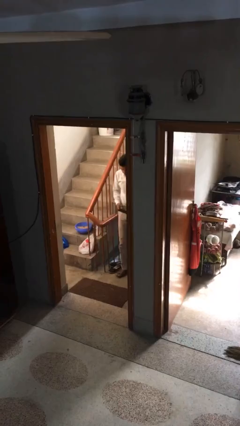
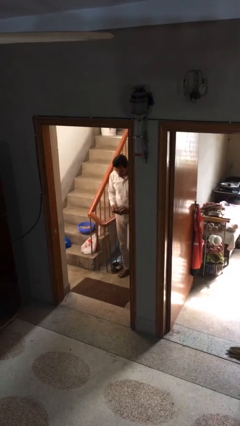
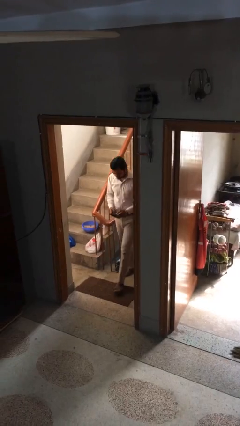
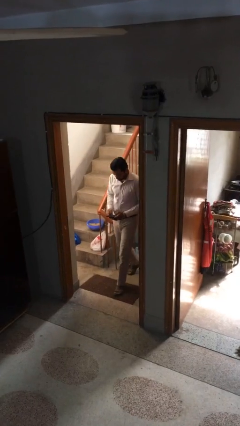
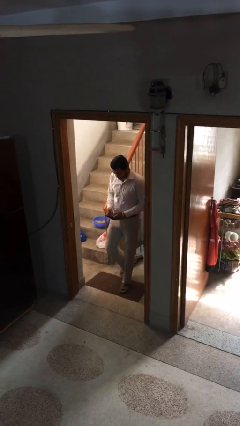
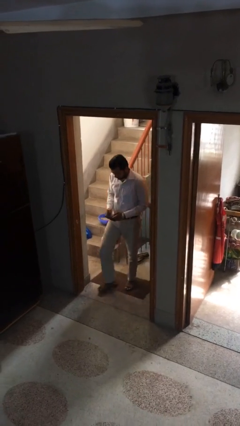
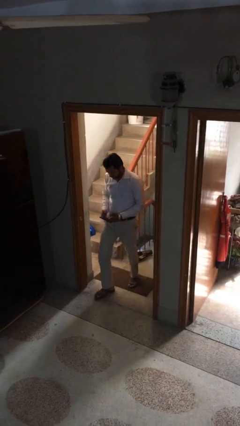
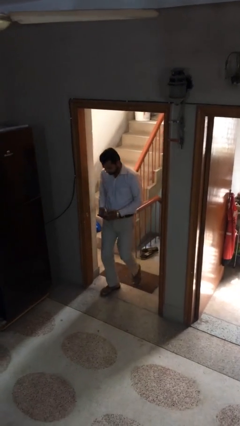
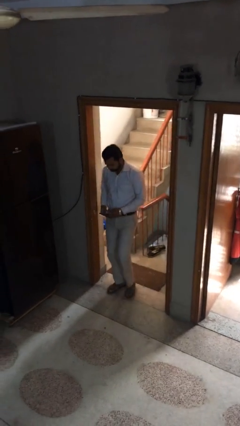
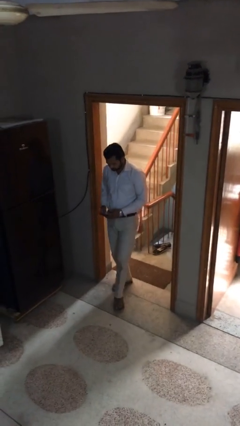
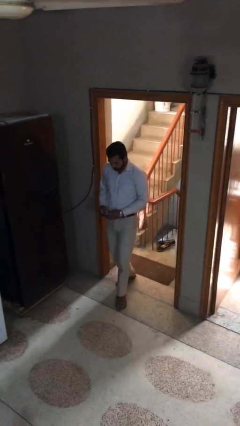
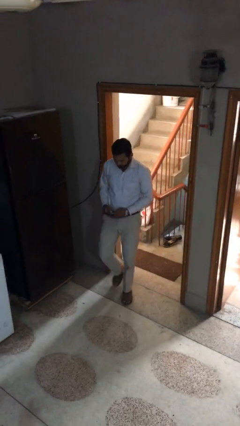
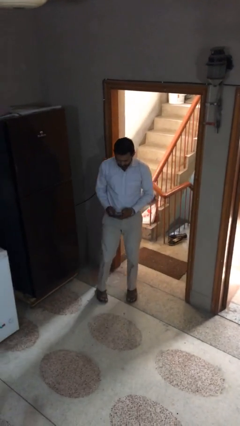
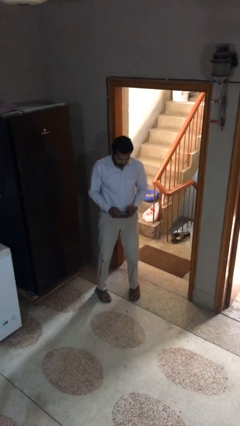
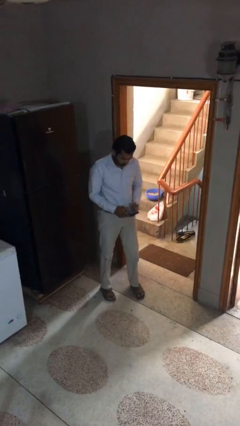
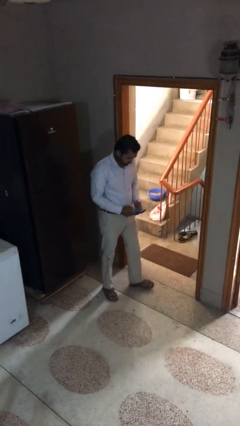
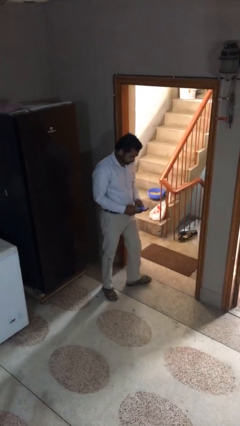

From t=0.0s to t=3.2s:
person enters scene through structure

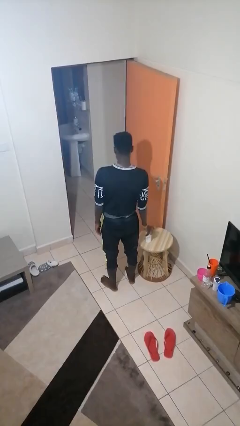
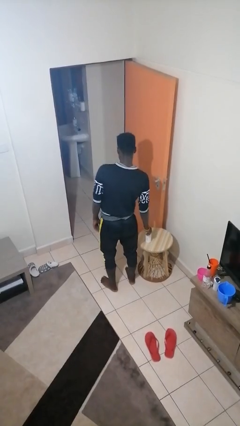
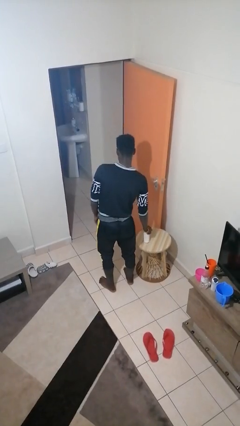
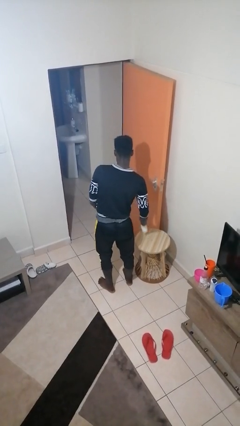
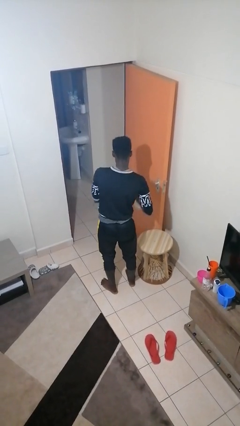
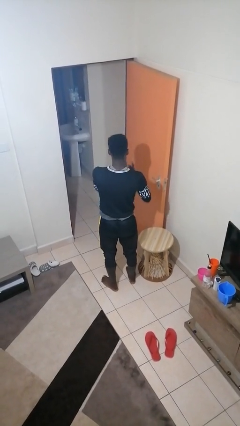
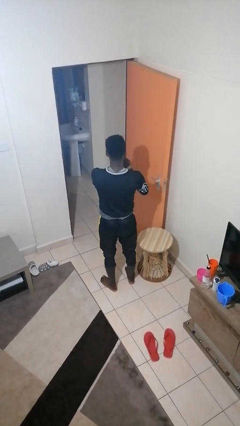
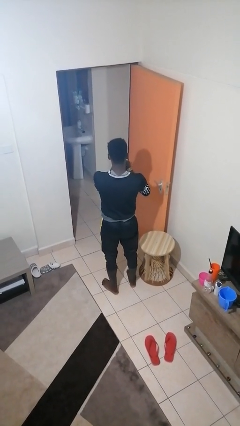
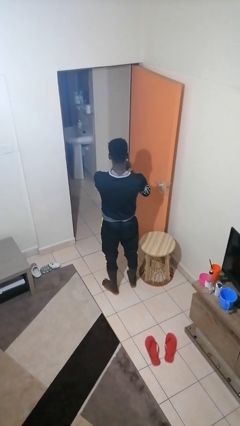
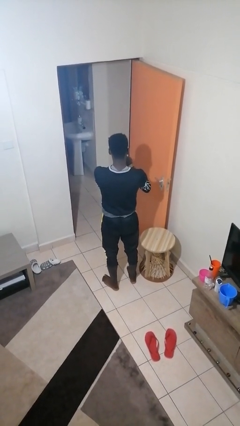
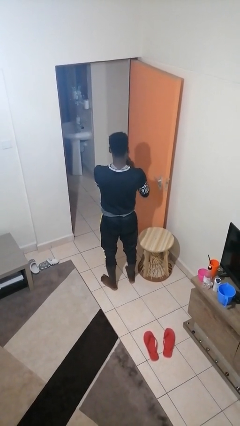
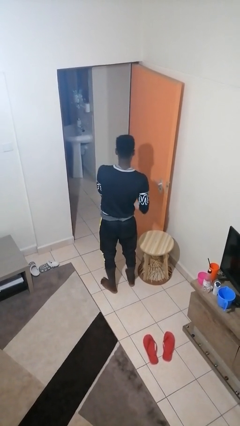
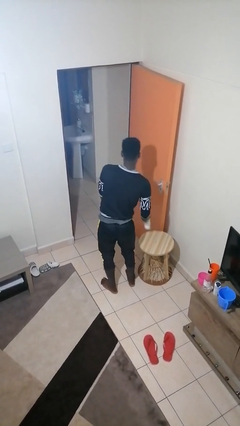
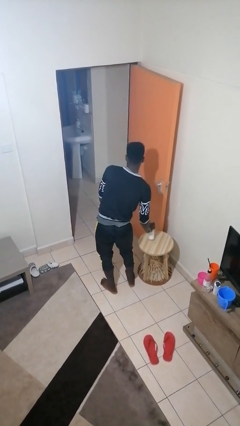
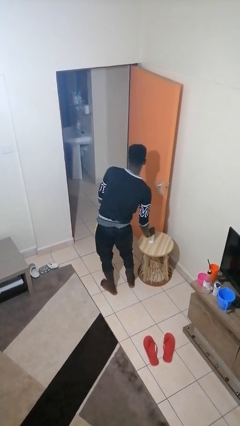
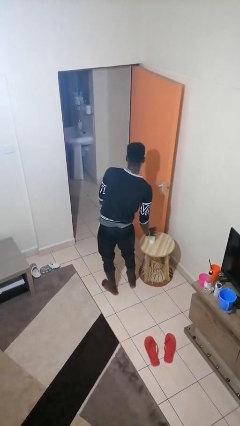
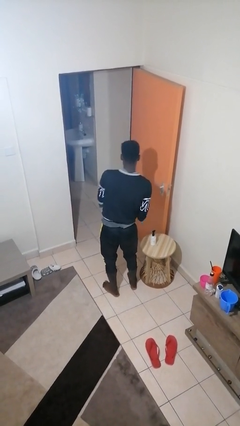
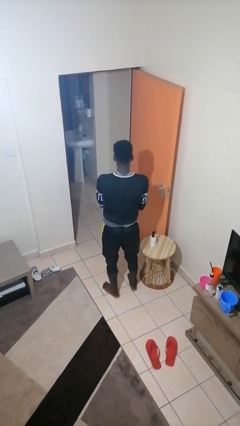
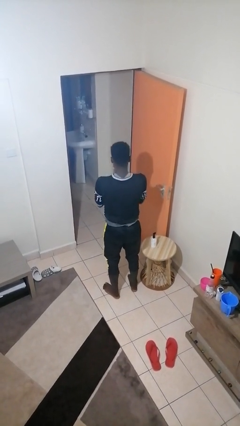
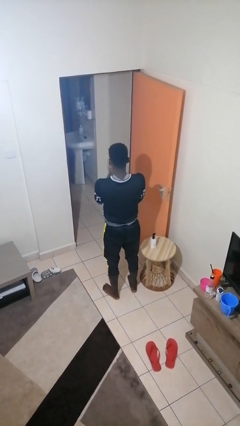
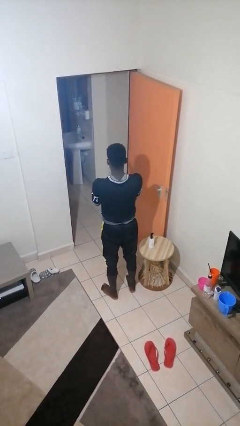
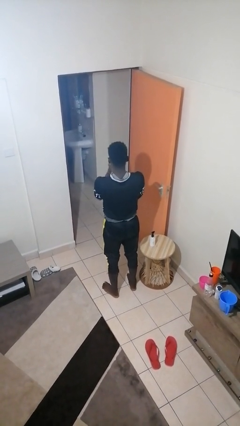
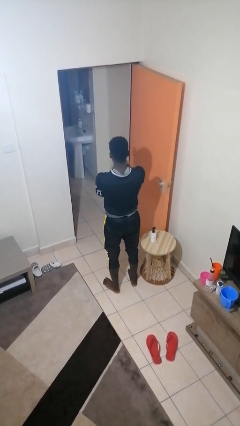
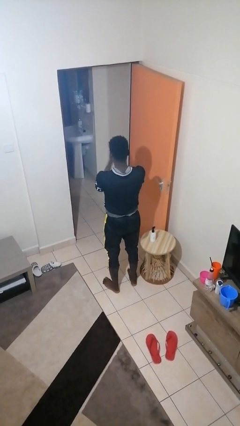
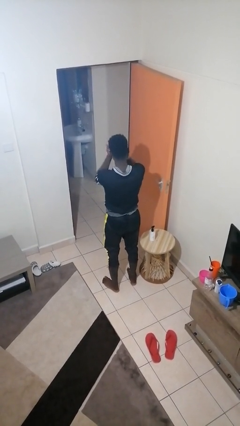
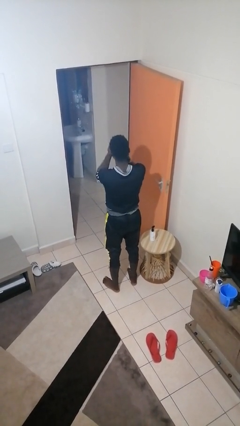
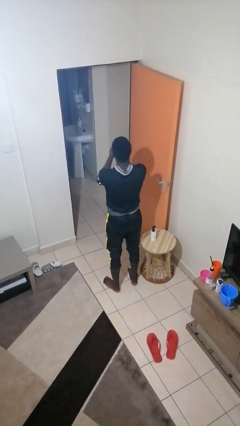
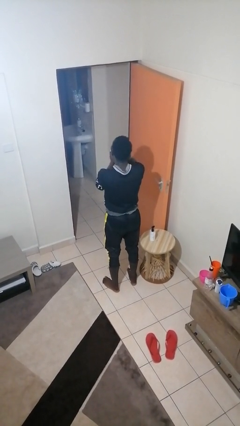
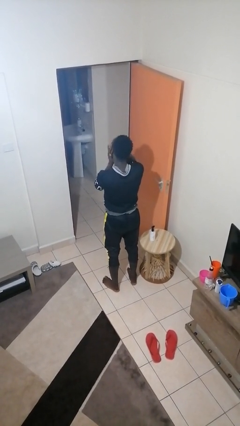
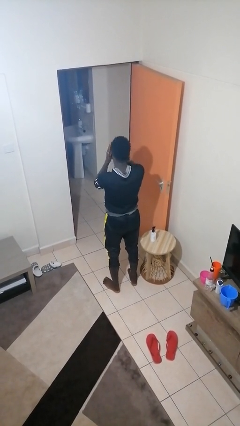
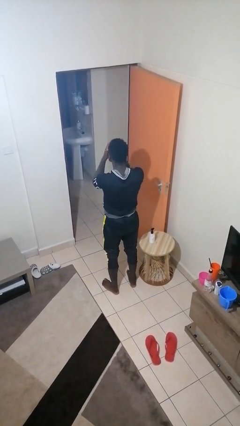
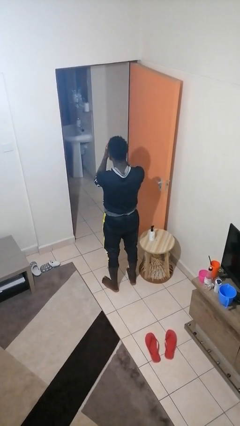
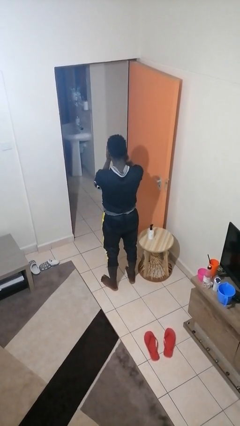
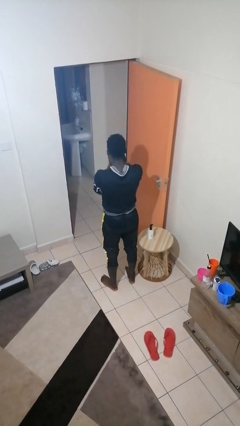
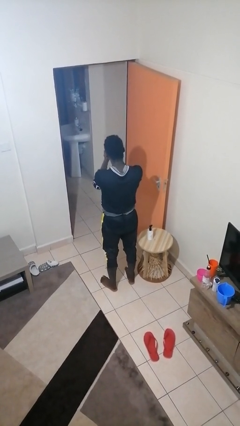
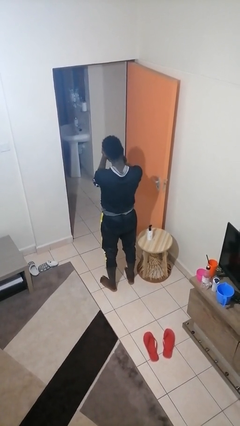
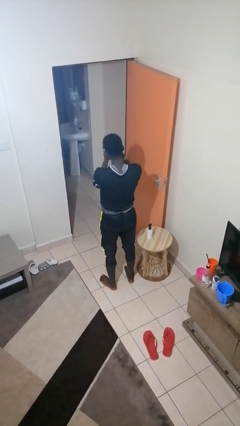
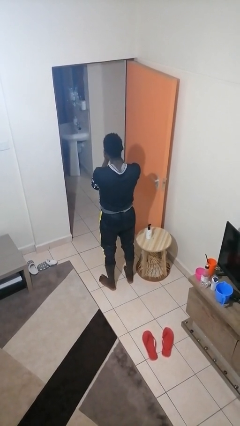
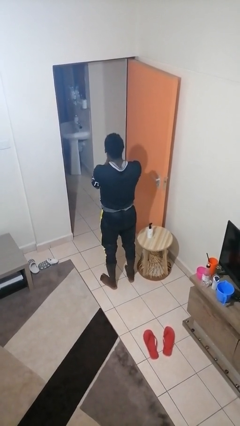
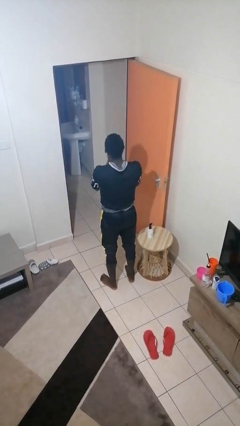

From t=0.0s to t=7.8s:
person applies sunscreen

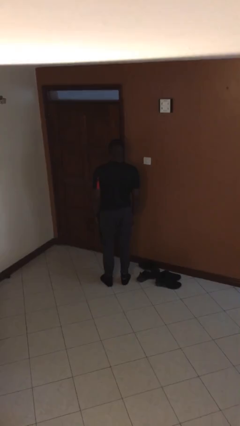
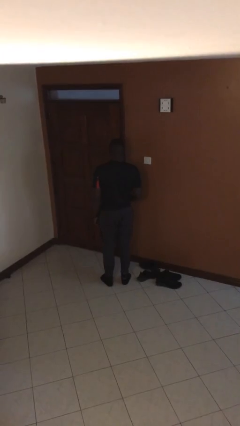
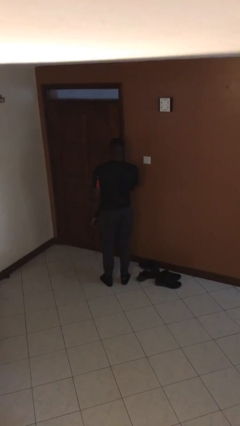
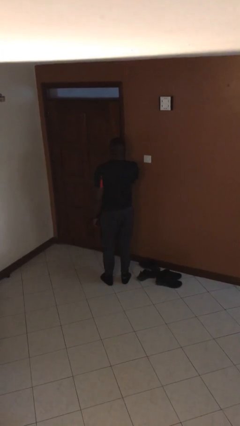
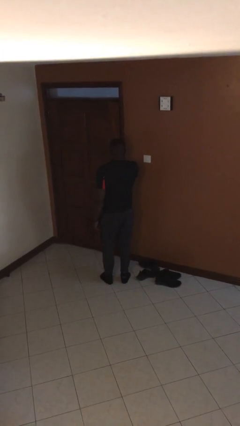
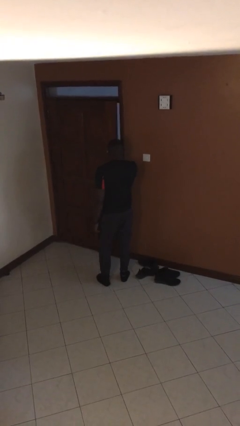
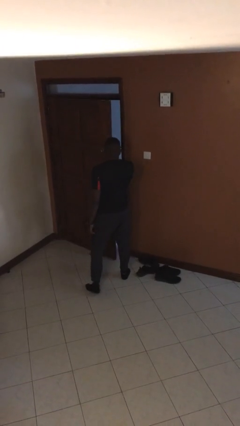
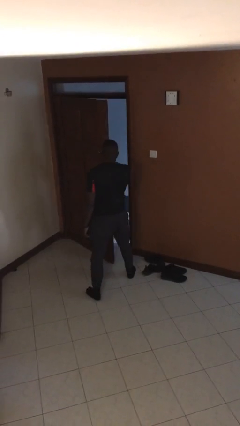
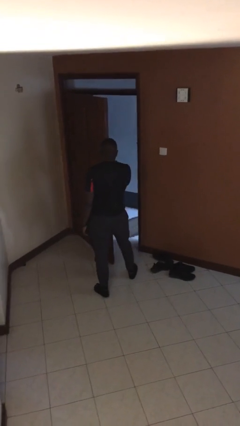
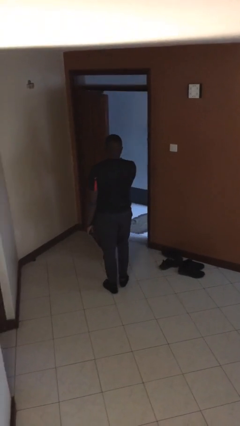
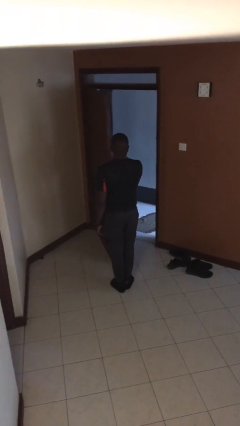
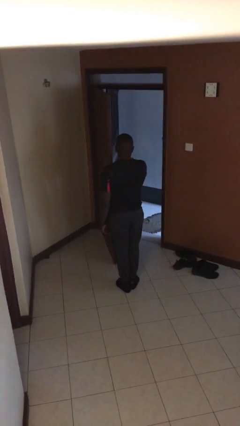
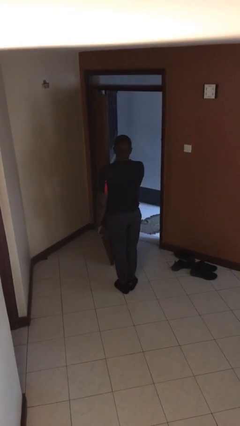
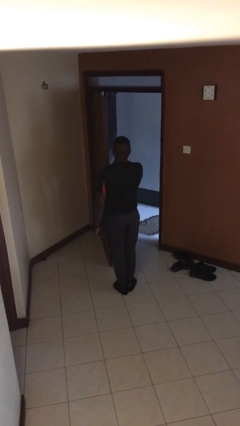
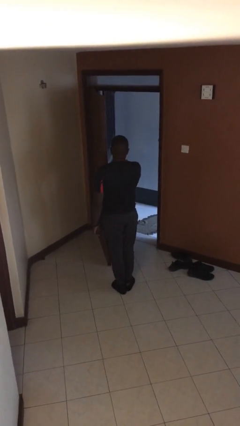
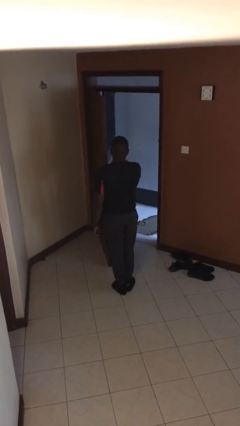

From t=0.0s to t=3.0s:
person opens facility door

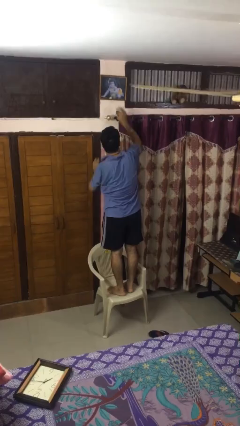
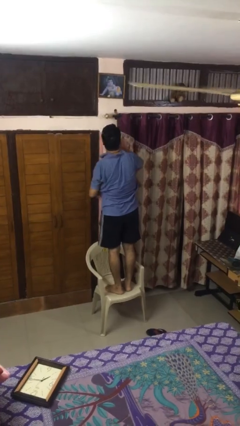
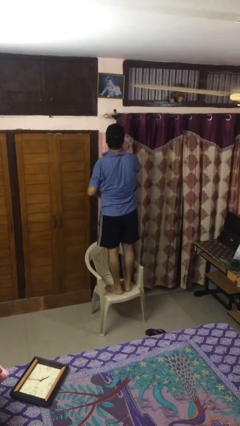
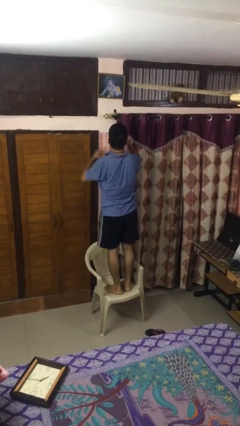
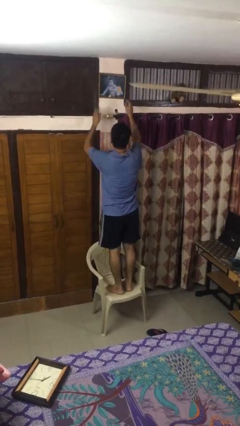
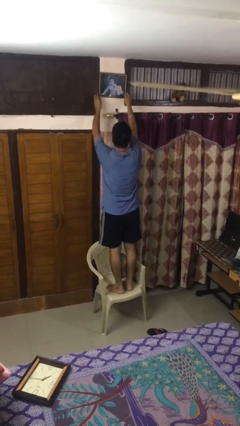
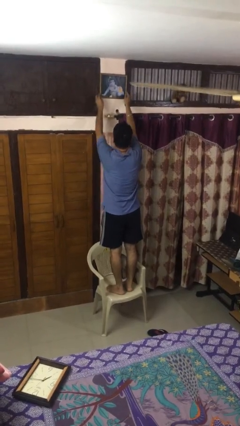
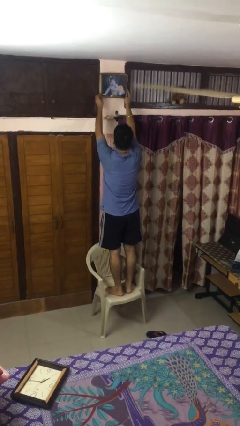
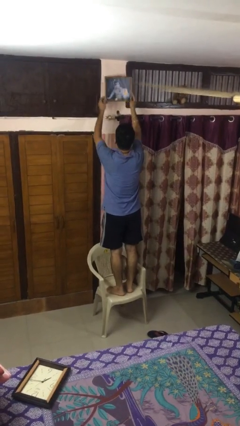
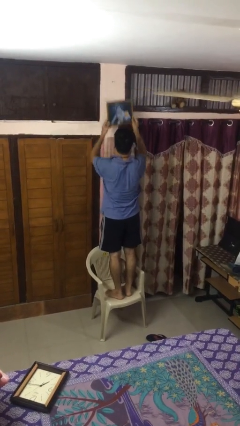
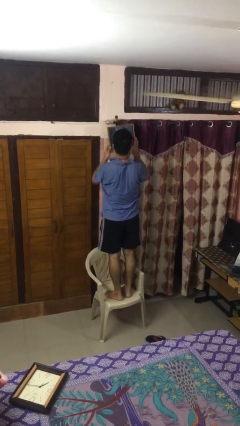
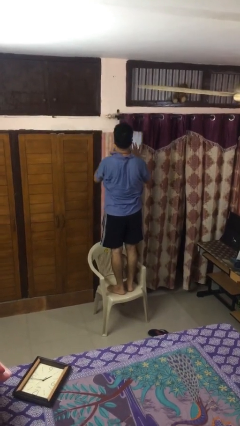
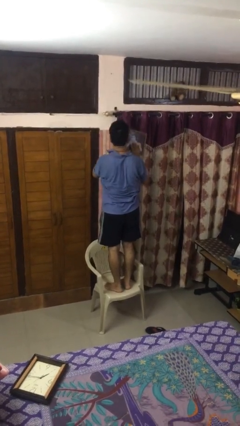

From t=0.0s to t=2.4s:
person takes down picture frame

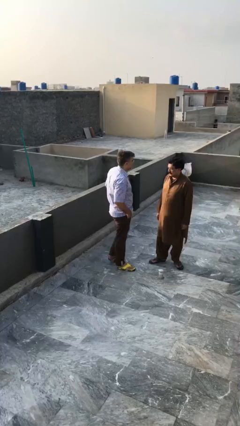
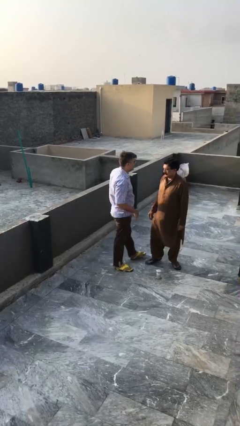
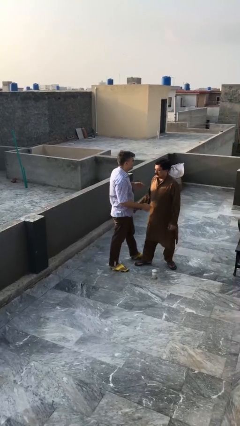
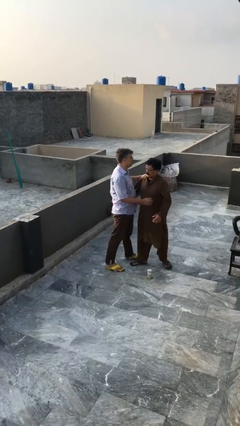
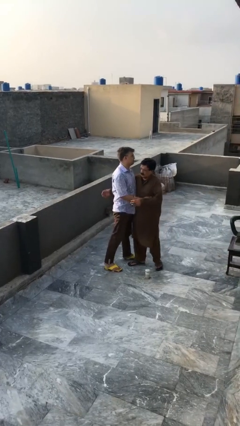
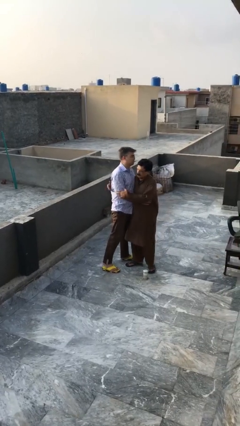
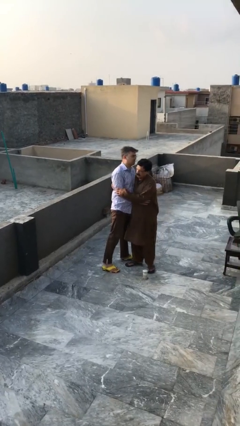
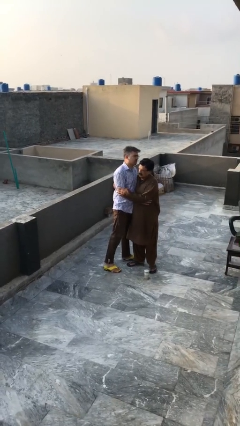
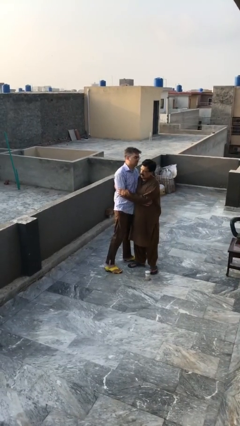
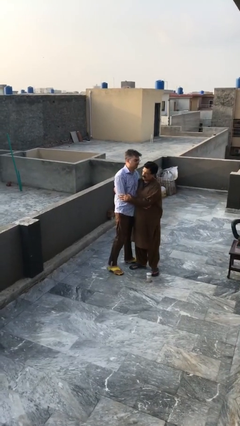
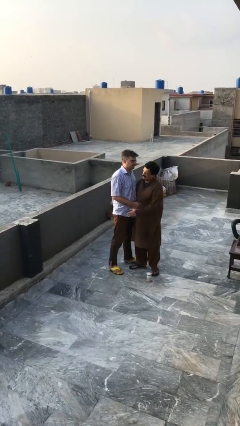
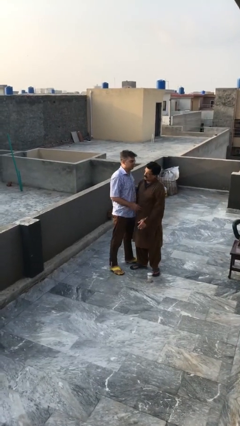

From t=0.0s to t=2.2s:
person embraces person
